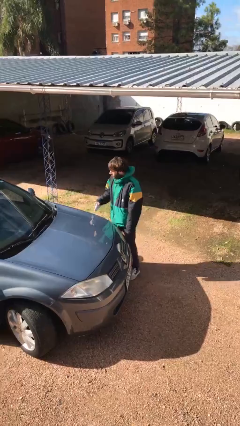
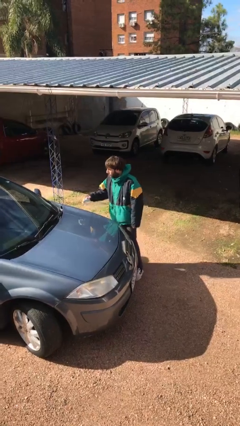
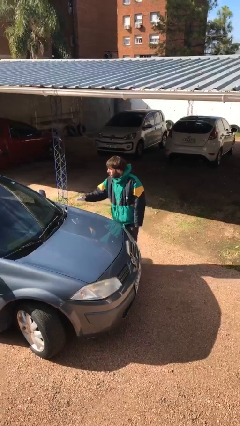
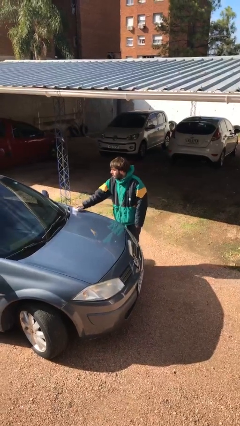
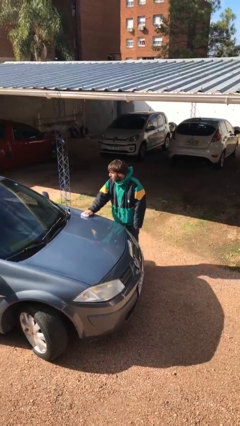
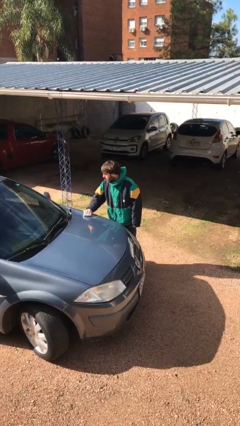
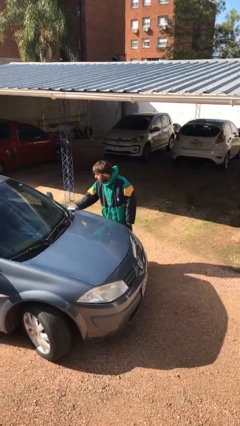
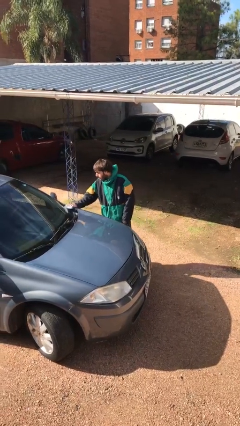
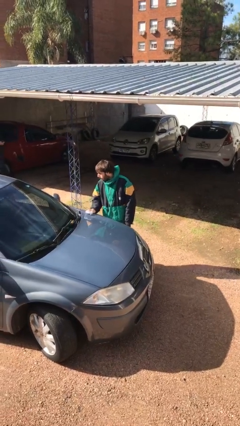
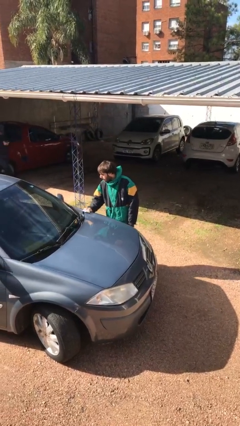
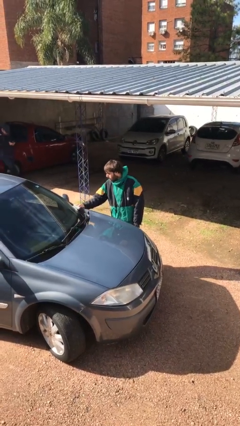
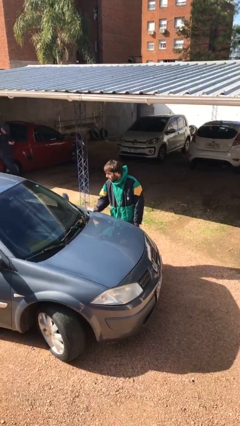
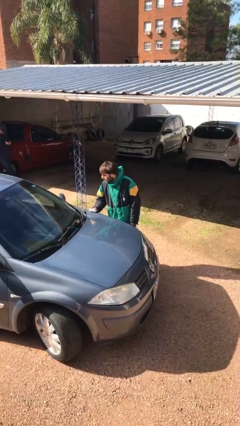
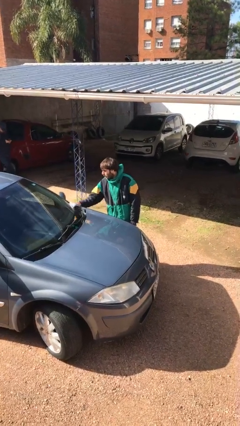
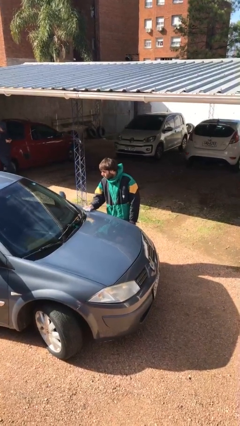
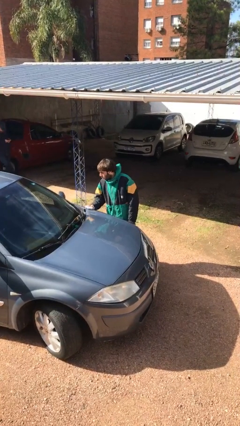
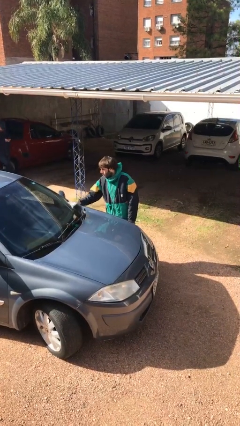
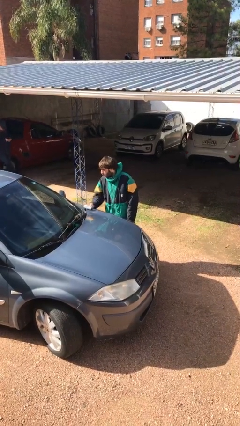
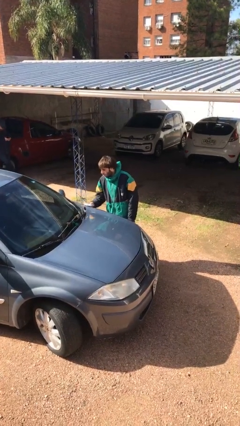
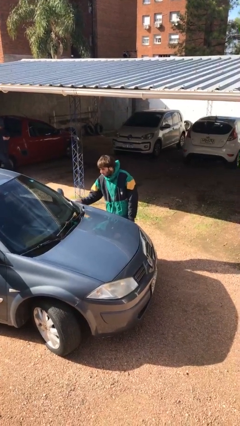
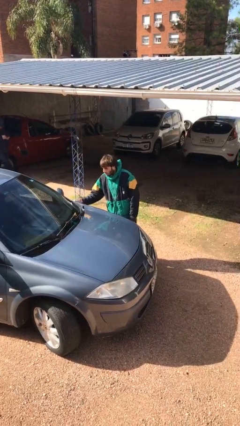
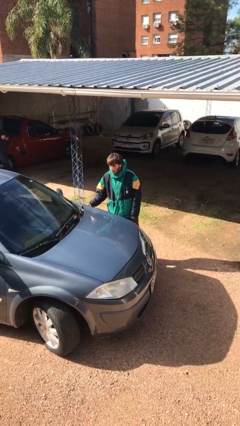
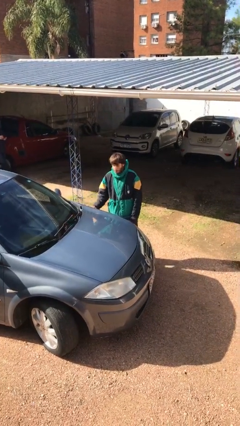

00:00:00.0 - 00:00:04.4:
person polishes car with rag

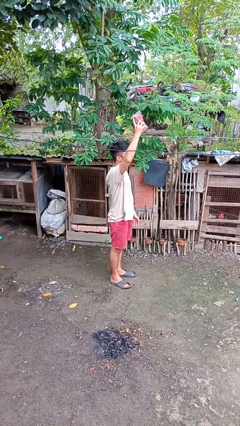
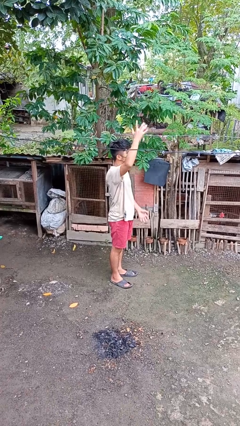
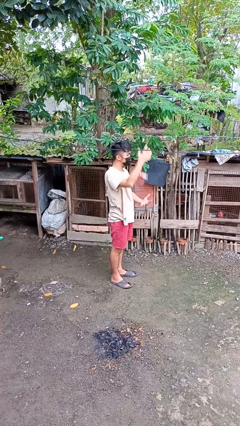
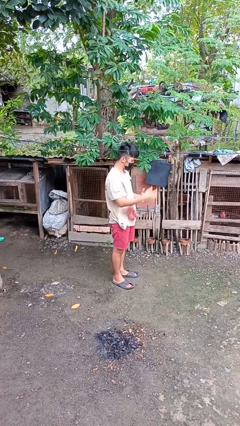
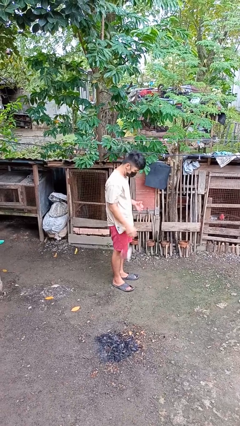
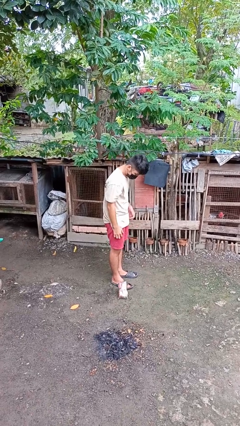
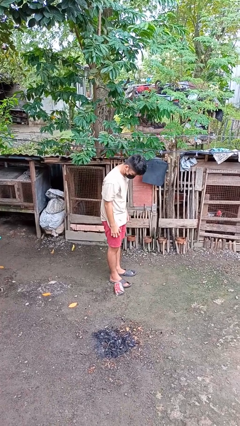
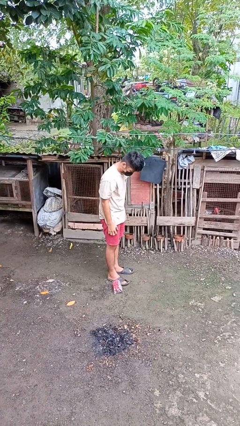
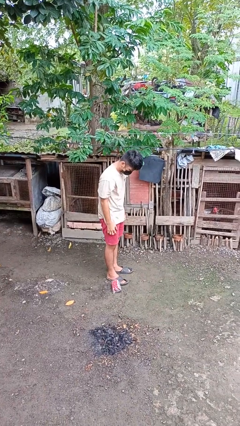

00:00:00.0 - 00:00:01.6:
person drops object

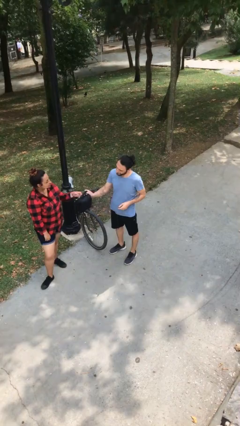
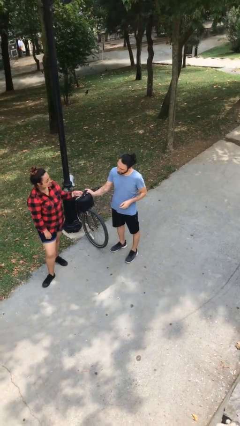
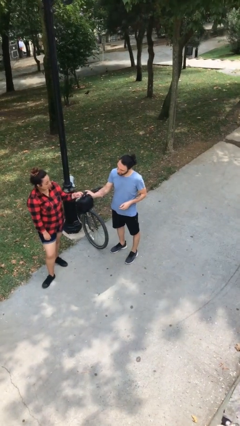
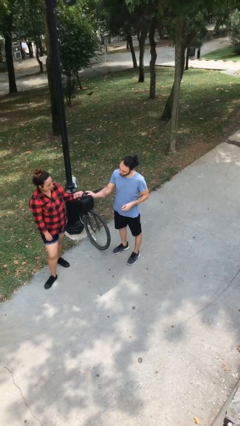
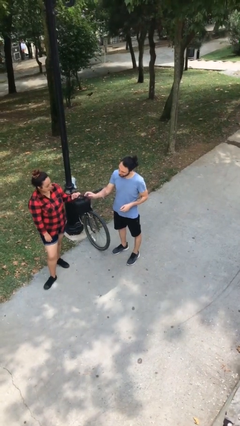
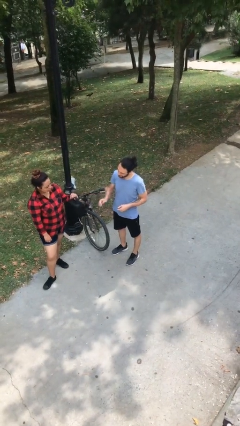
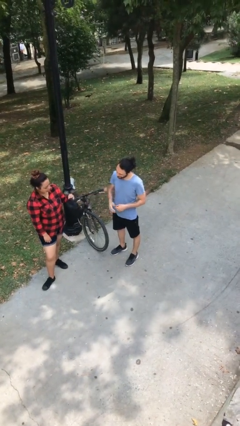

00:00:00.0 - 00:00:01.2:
person transfers object to person

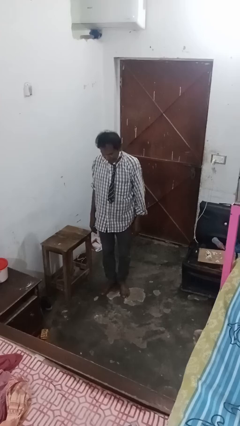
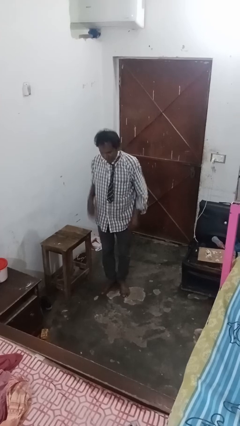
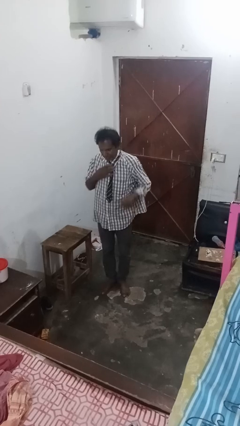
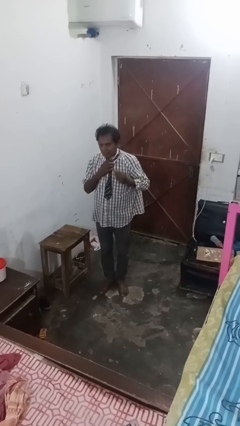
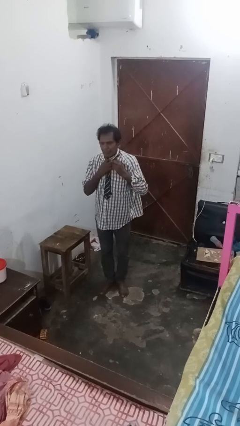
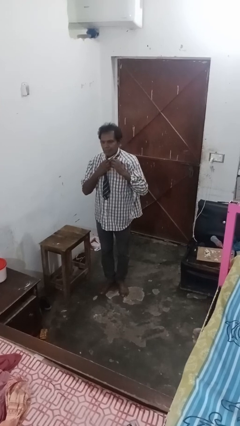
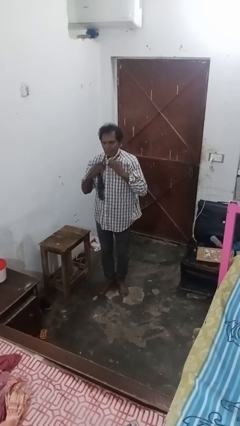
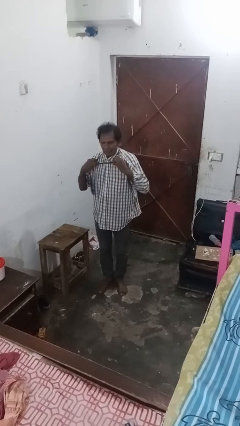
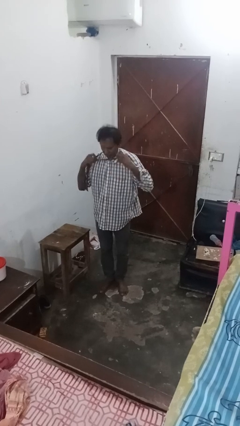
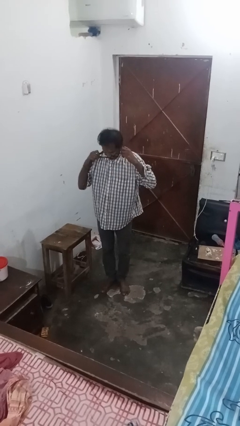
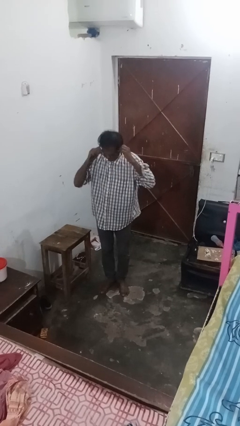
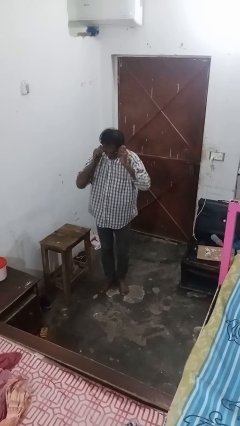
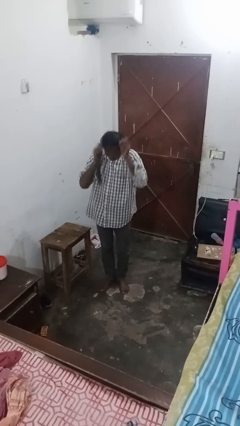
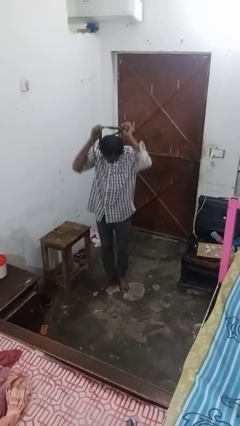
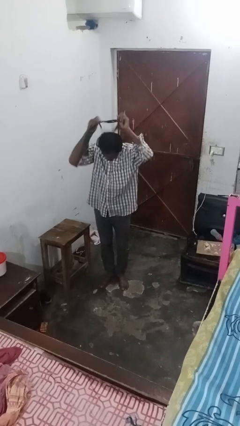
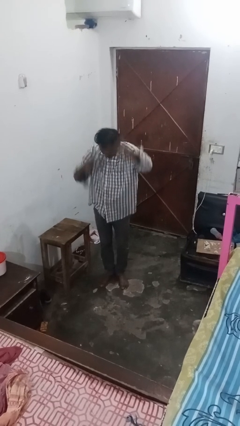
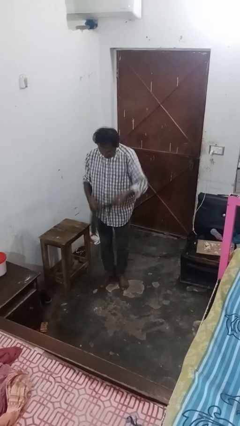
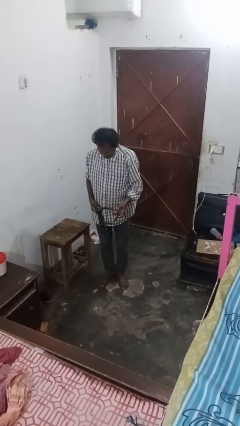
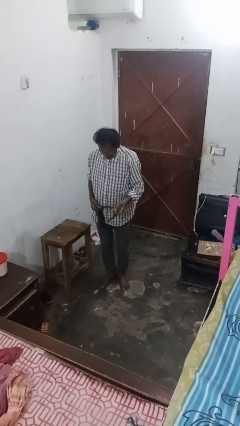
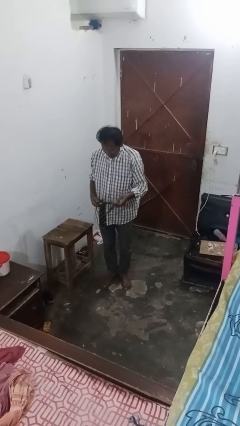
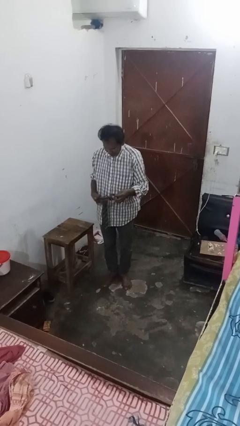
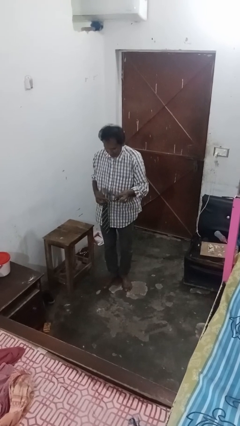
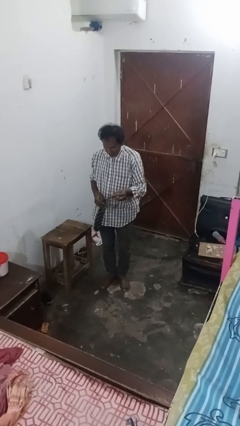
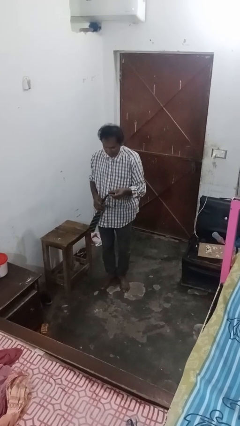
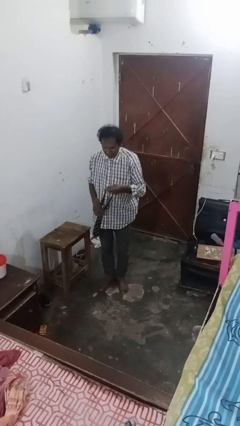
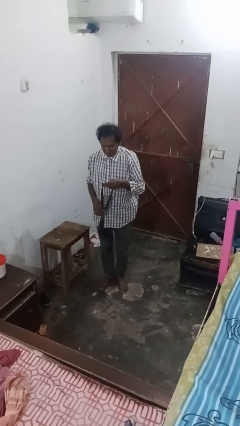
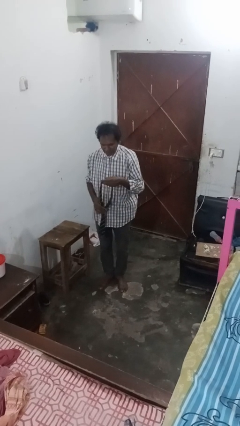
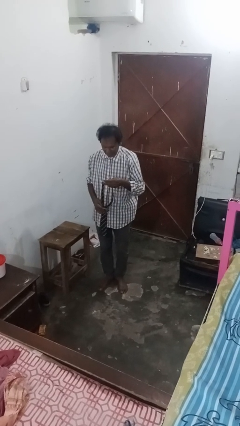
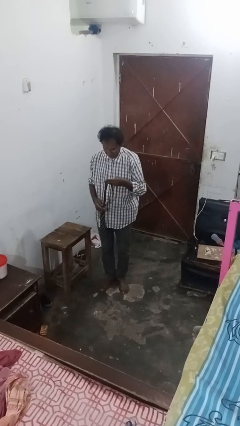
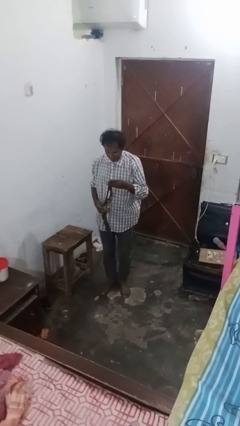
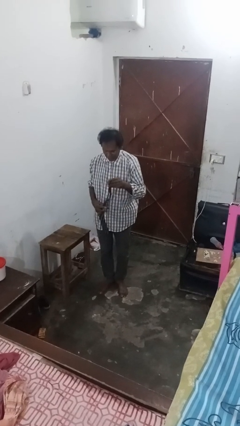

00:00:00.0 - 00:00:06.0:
person takes off necktie

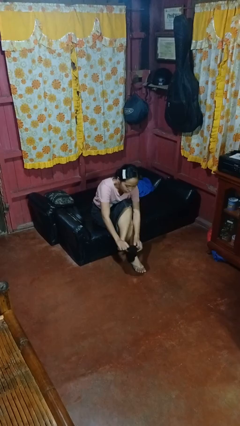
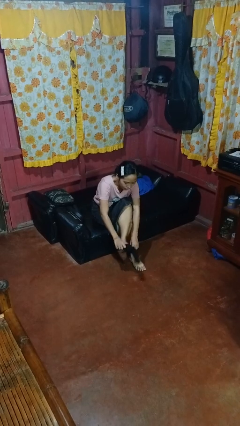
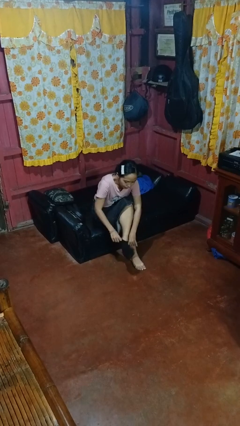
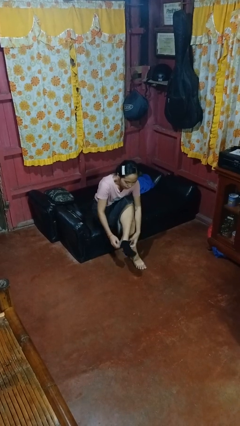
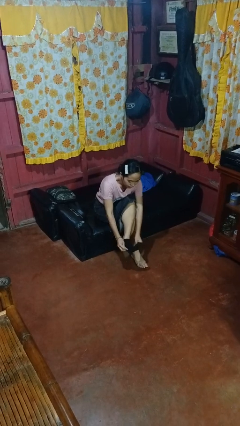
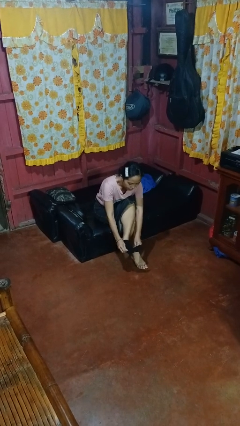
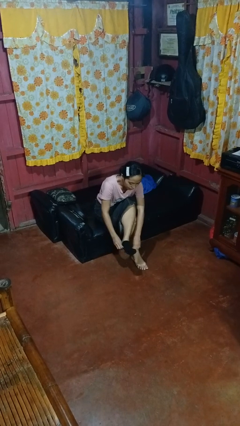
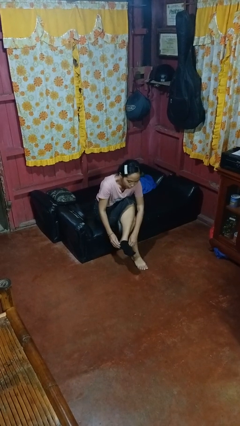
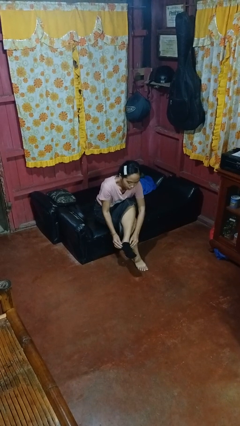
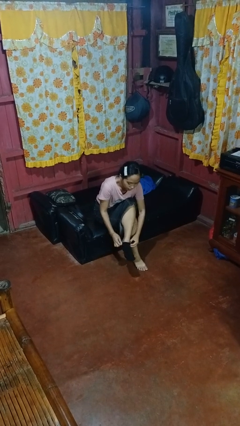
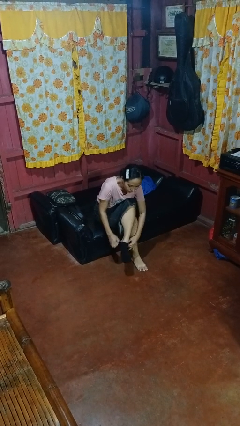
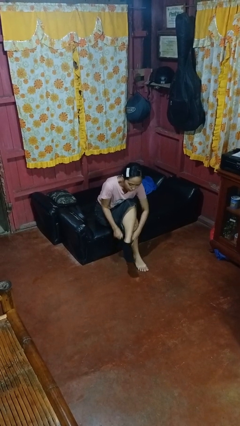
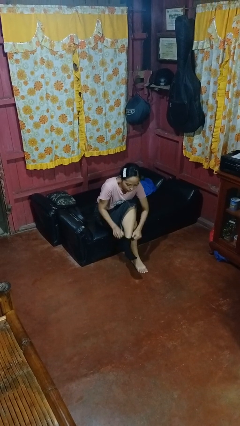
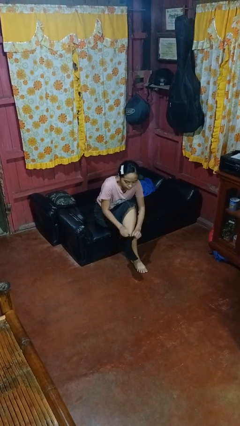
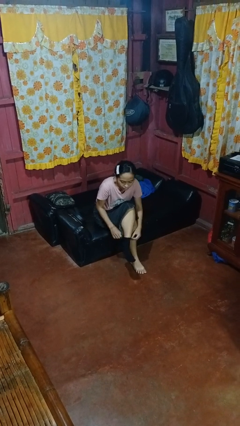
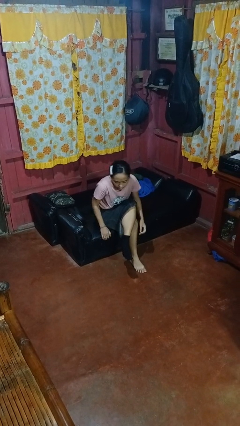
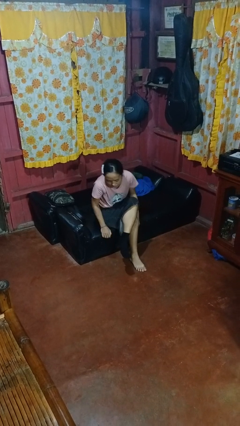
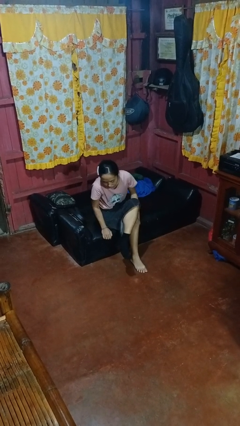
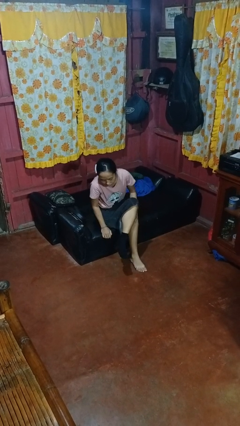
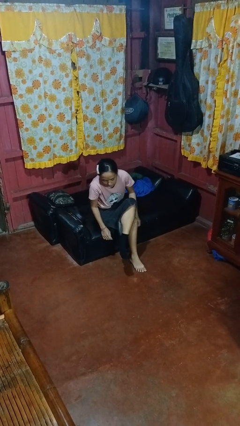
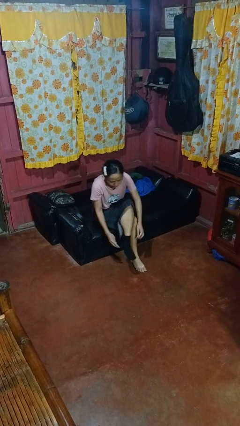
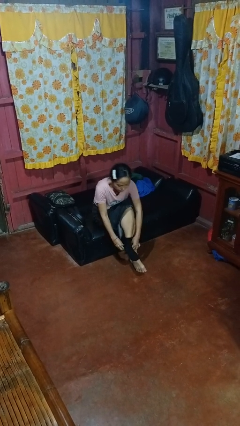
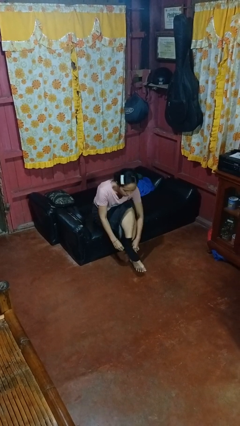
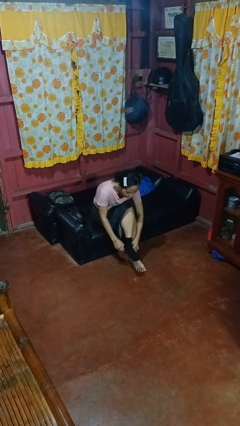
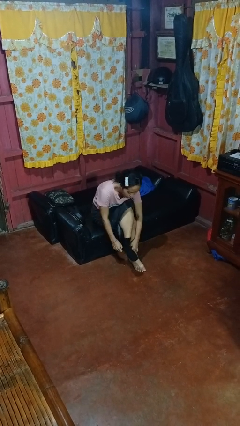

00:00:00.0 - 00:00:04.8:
person puts on socks
